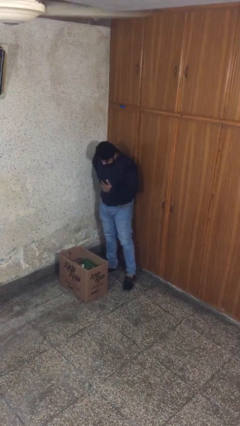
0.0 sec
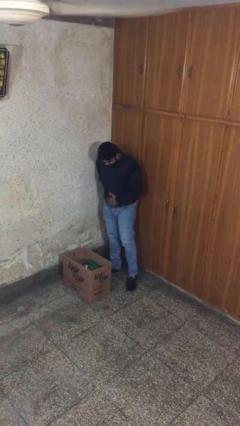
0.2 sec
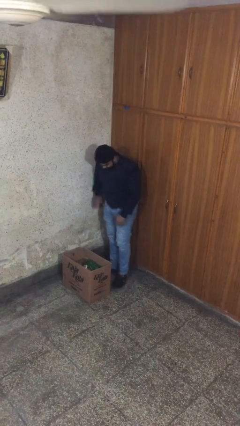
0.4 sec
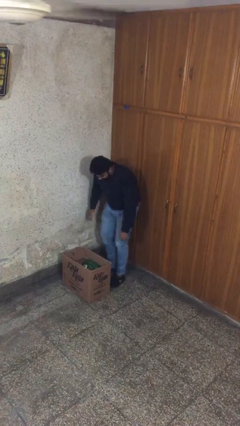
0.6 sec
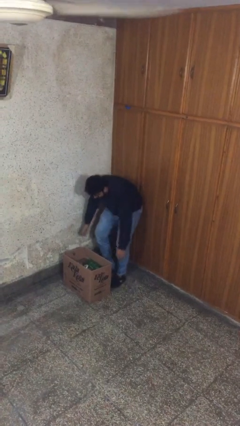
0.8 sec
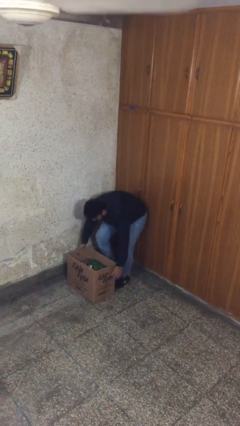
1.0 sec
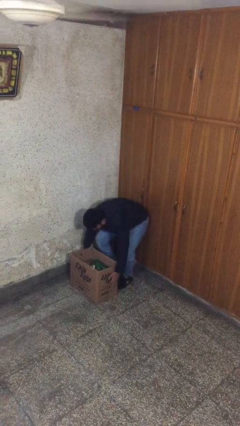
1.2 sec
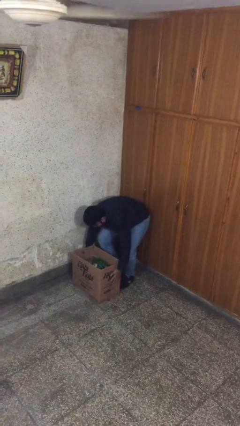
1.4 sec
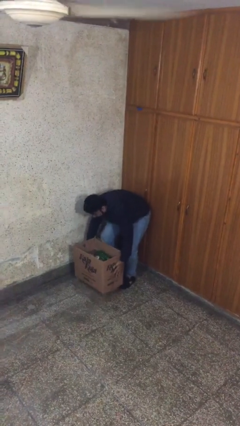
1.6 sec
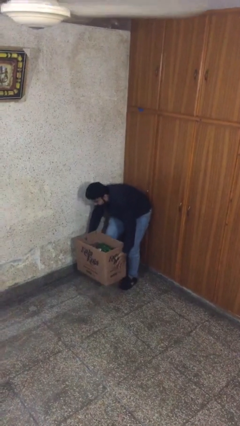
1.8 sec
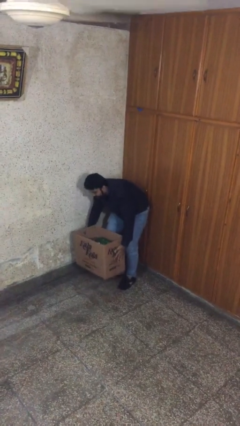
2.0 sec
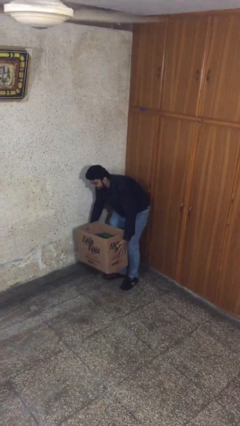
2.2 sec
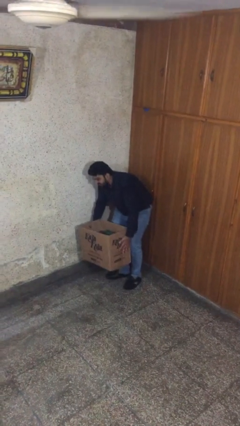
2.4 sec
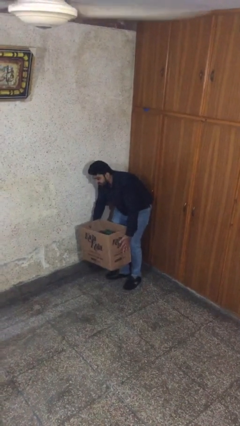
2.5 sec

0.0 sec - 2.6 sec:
person picks up object from floor

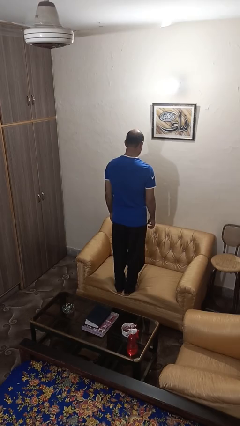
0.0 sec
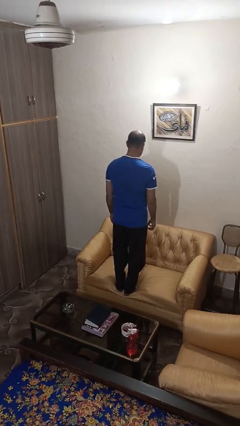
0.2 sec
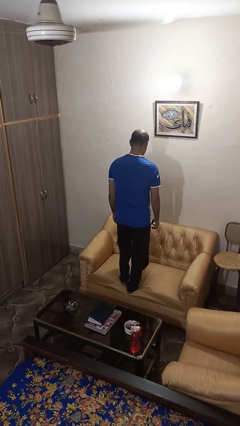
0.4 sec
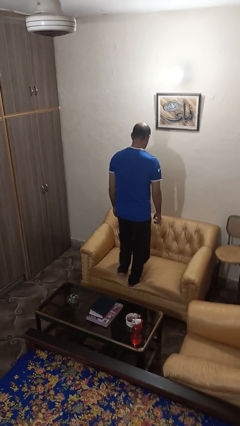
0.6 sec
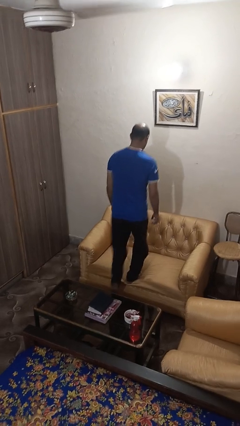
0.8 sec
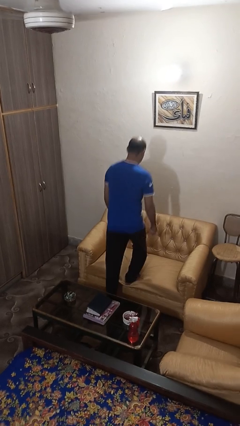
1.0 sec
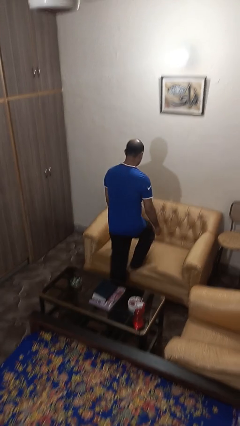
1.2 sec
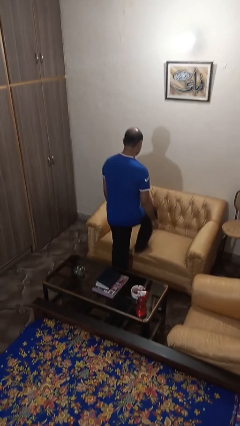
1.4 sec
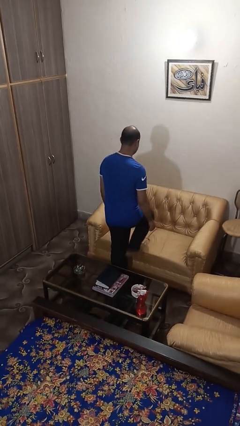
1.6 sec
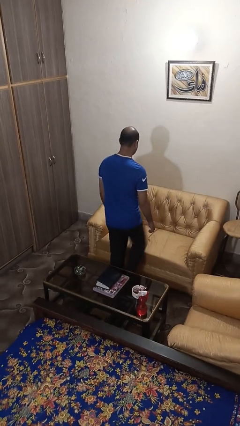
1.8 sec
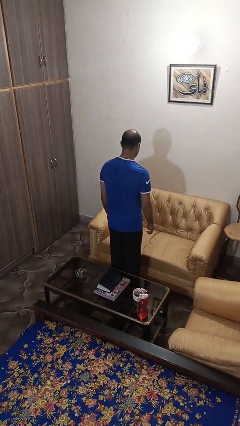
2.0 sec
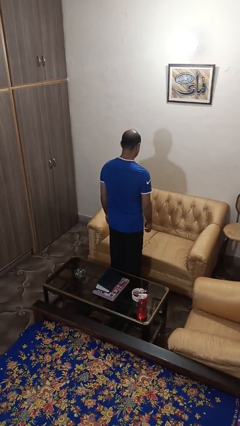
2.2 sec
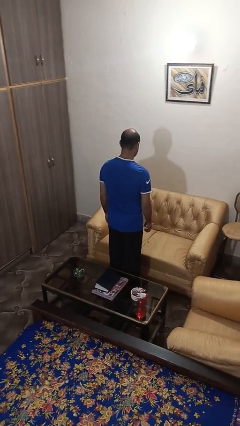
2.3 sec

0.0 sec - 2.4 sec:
person climbs off couch

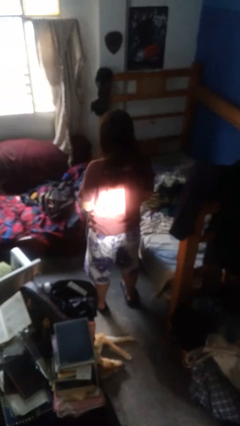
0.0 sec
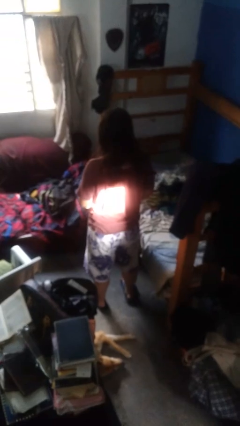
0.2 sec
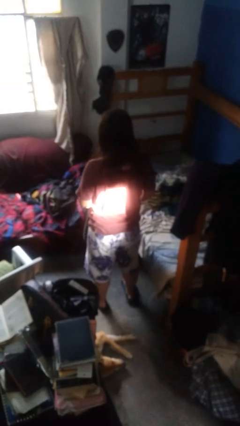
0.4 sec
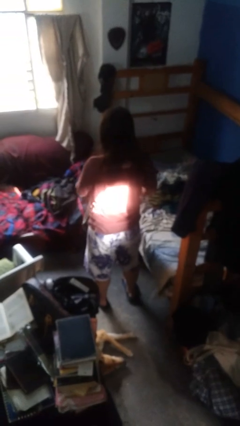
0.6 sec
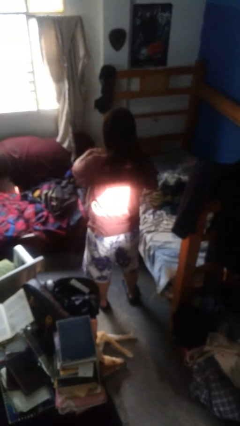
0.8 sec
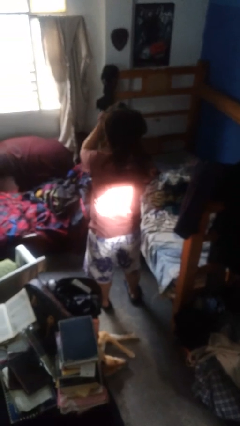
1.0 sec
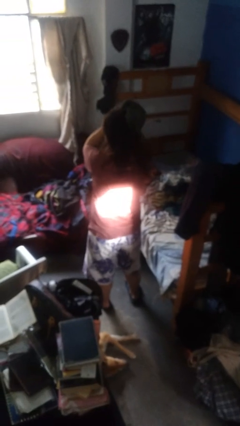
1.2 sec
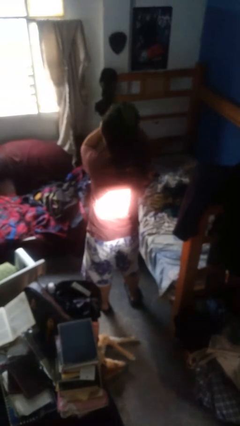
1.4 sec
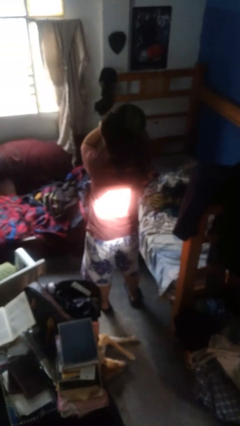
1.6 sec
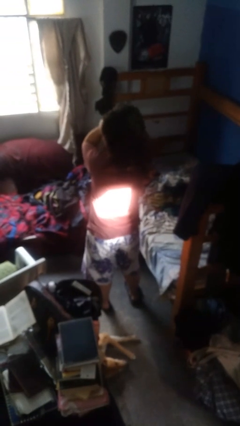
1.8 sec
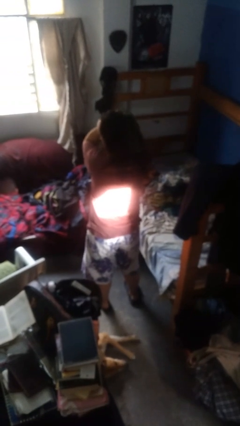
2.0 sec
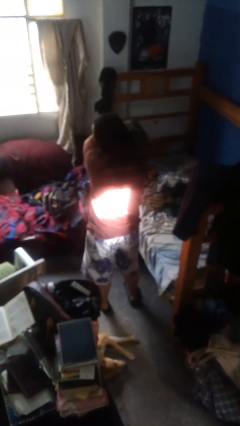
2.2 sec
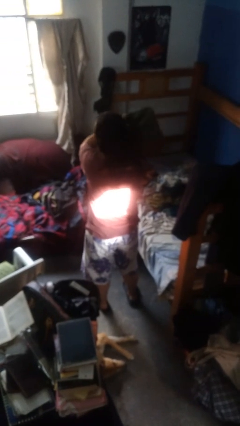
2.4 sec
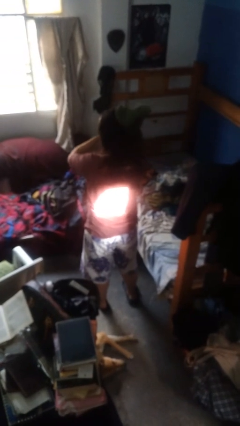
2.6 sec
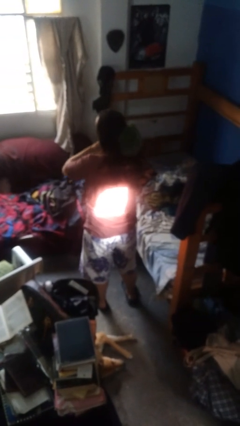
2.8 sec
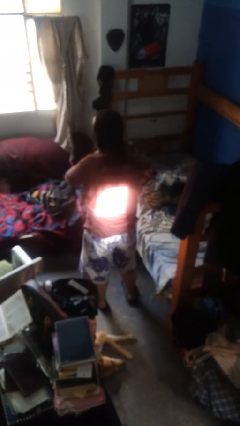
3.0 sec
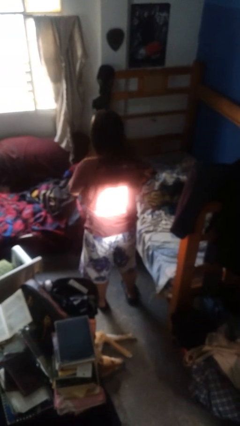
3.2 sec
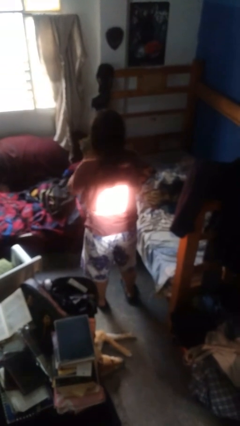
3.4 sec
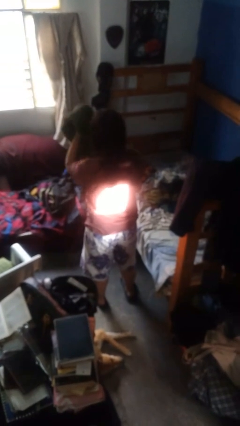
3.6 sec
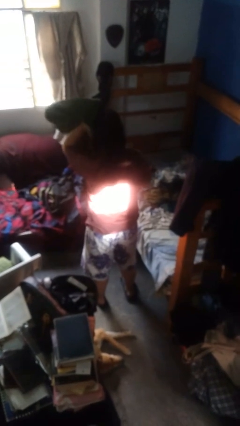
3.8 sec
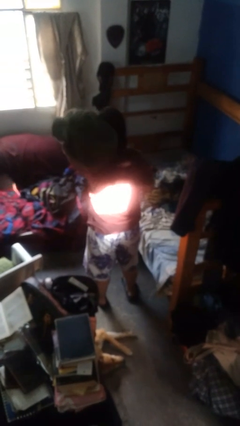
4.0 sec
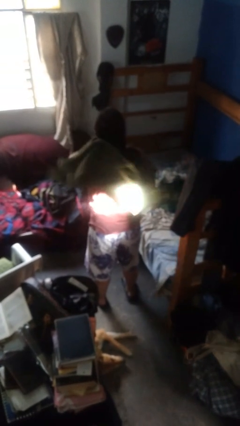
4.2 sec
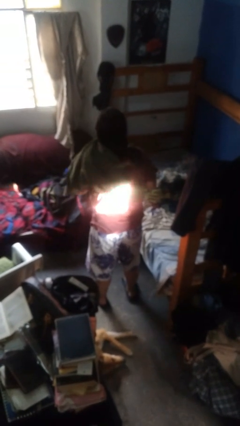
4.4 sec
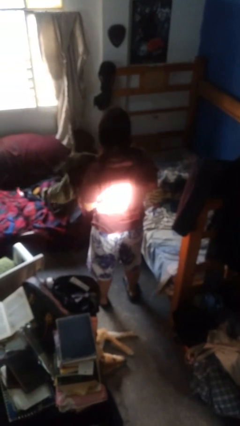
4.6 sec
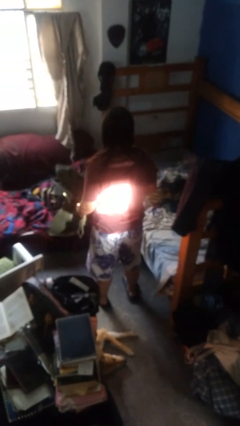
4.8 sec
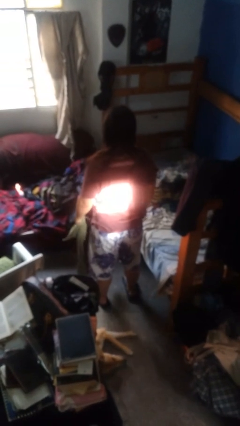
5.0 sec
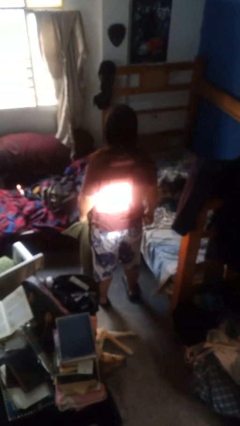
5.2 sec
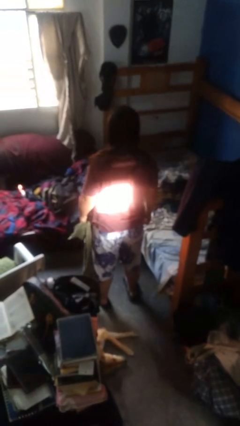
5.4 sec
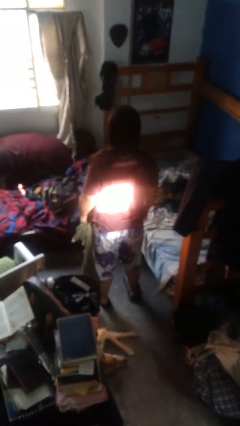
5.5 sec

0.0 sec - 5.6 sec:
person dries hair with towel

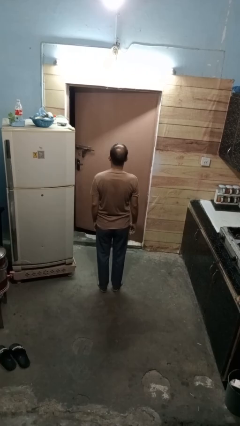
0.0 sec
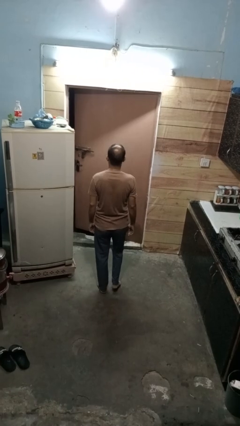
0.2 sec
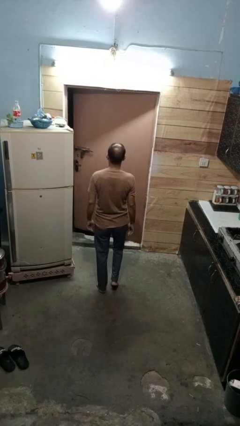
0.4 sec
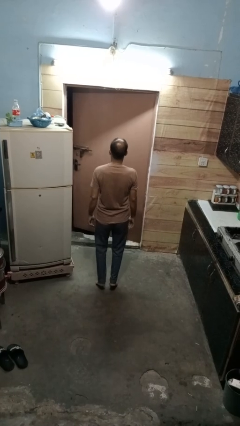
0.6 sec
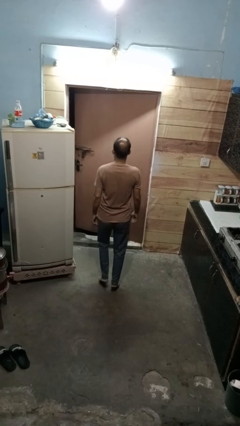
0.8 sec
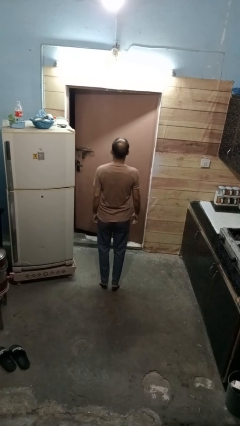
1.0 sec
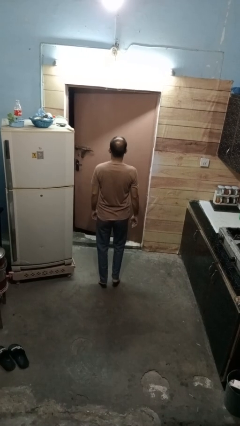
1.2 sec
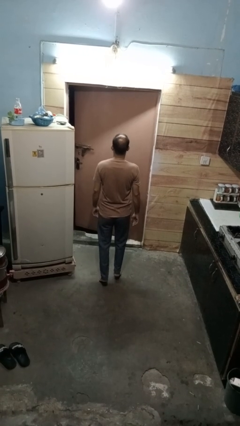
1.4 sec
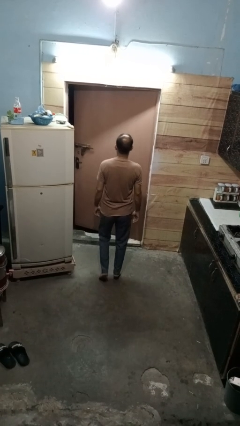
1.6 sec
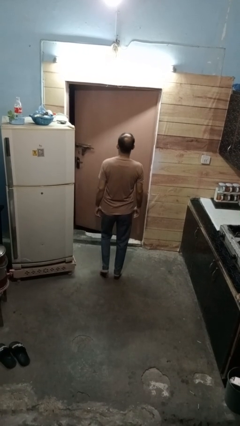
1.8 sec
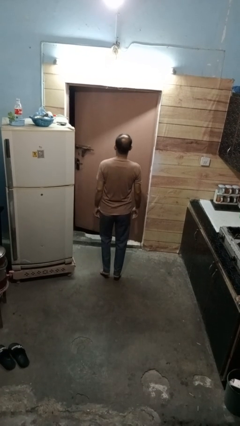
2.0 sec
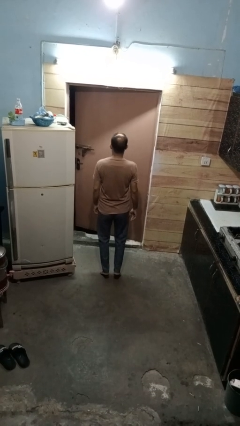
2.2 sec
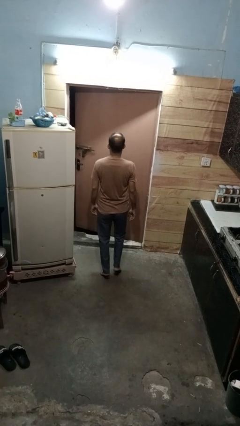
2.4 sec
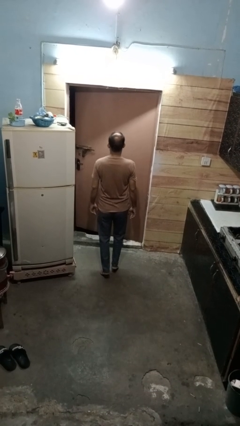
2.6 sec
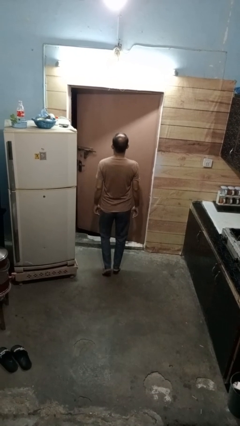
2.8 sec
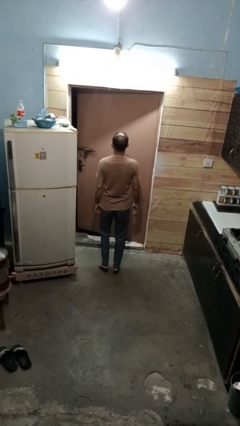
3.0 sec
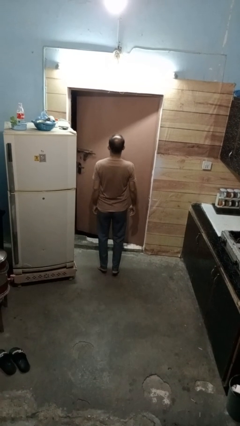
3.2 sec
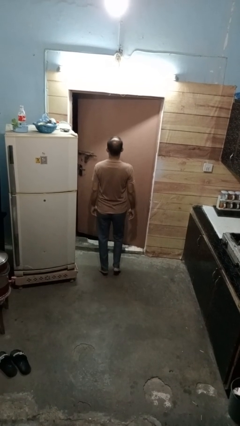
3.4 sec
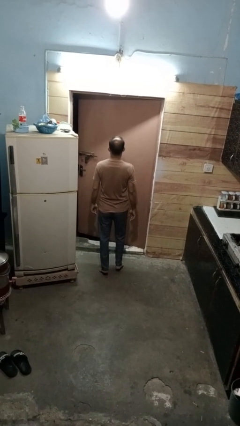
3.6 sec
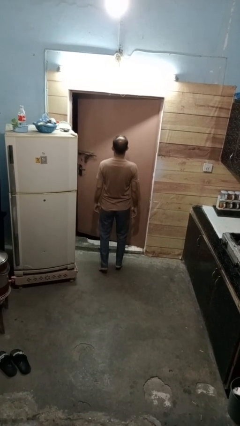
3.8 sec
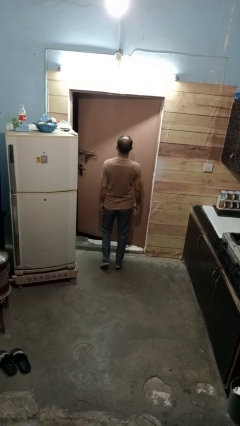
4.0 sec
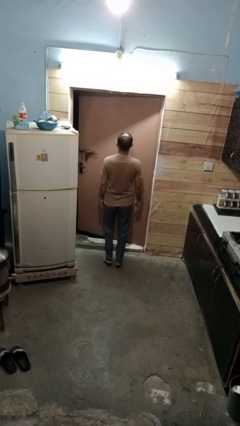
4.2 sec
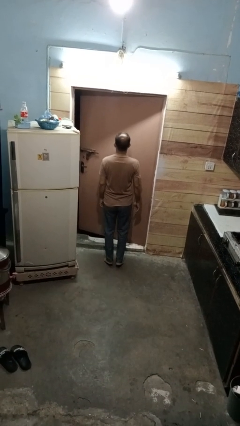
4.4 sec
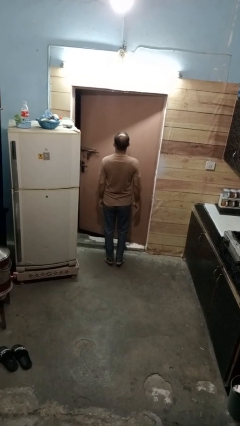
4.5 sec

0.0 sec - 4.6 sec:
person walks tiptoe

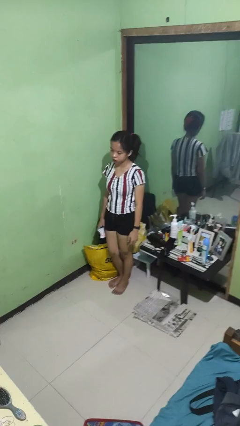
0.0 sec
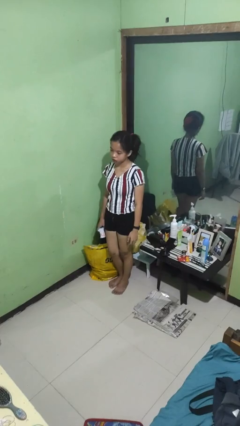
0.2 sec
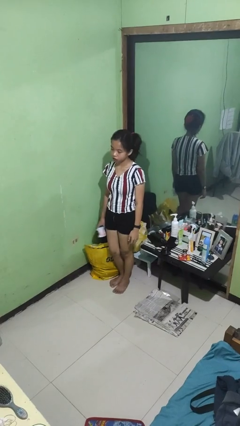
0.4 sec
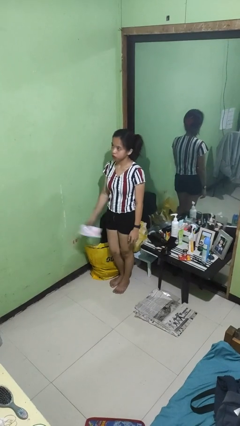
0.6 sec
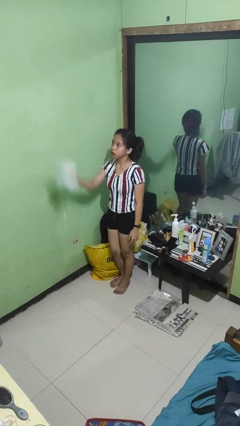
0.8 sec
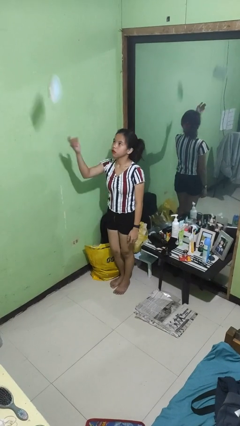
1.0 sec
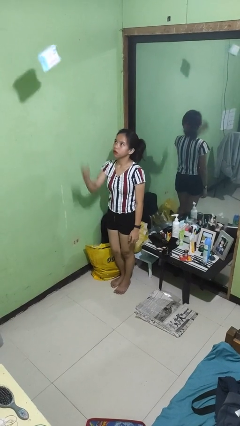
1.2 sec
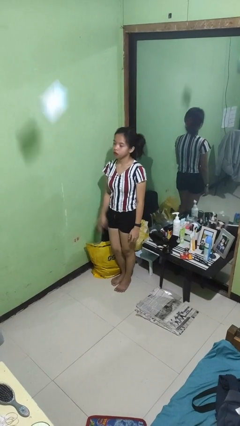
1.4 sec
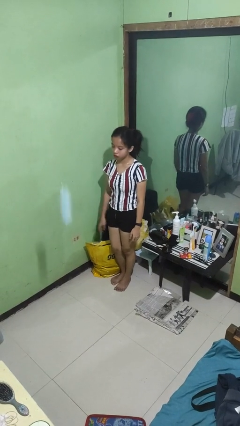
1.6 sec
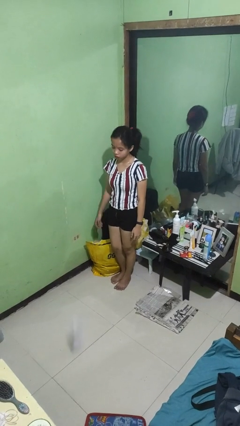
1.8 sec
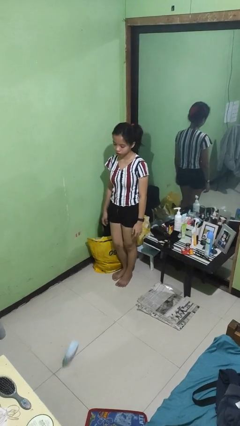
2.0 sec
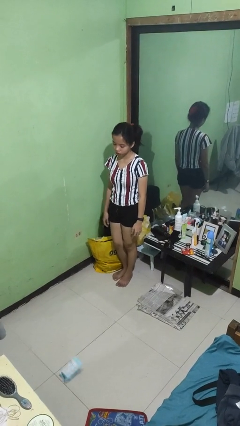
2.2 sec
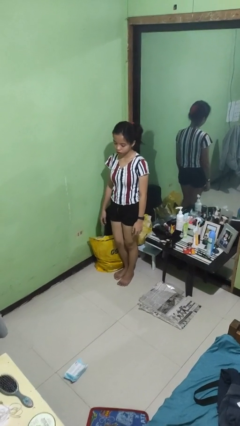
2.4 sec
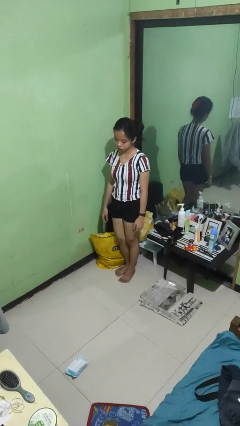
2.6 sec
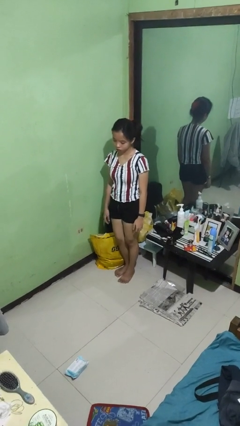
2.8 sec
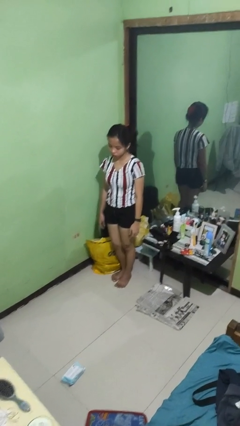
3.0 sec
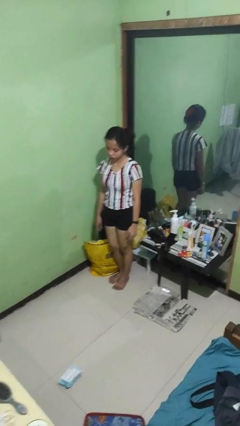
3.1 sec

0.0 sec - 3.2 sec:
person throws object into air
